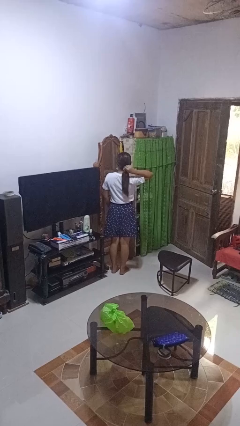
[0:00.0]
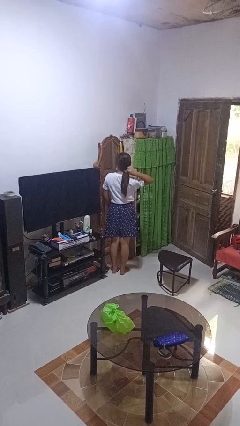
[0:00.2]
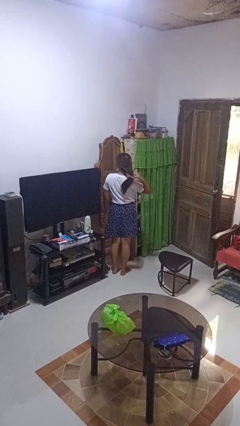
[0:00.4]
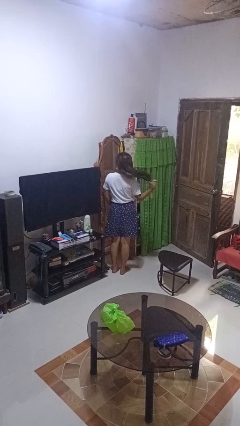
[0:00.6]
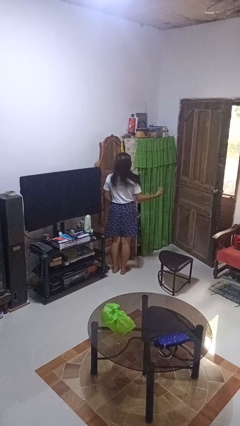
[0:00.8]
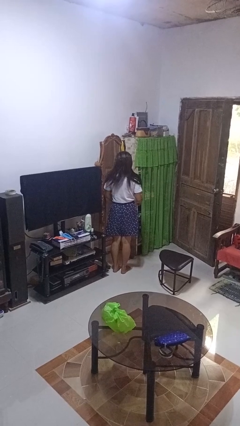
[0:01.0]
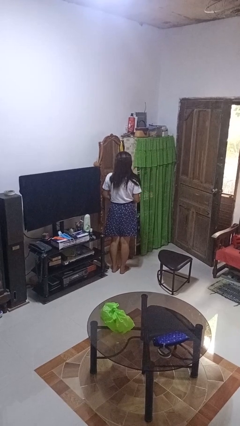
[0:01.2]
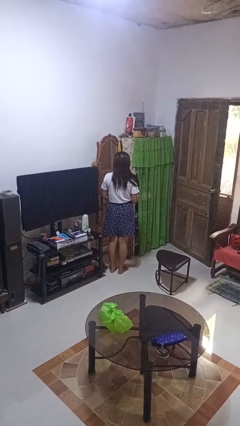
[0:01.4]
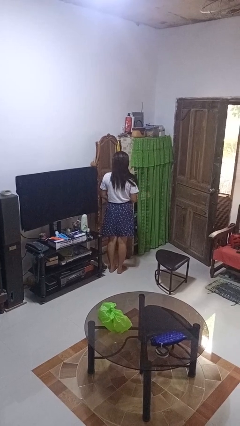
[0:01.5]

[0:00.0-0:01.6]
person takes off hairtie

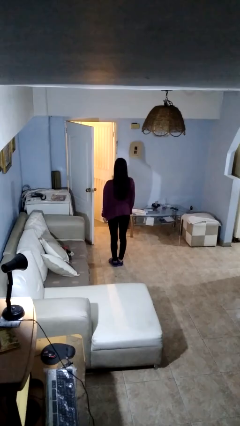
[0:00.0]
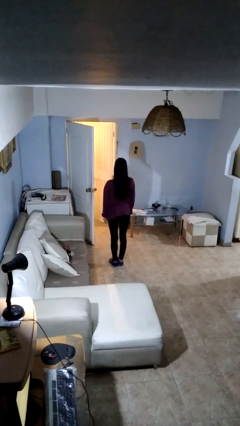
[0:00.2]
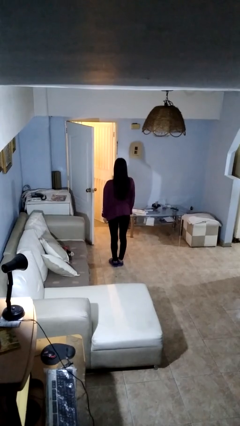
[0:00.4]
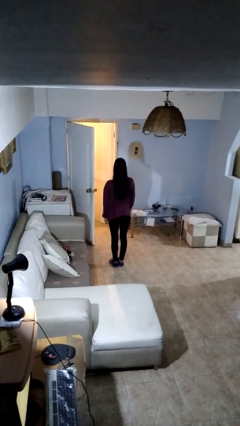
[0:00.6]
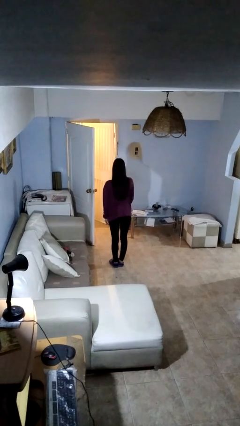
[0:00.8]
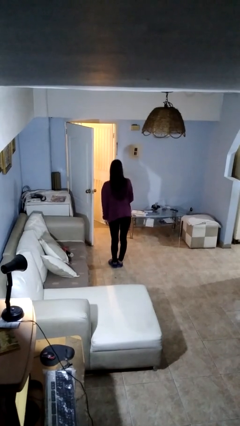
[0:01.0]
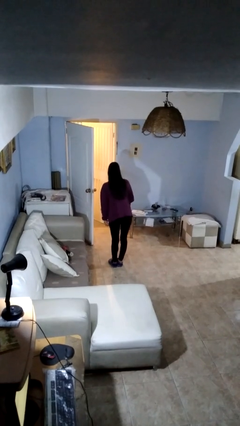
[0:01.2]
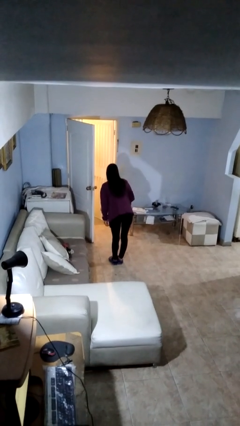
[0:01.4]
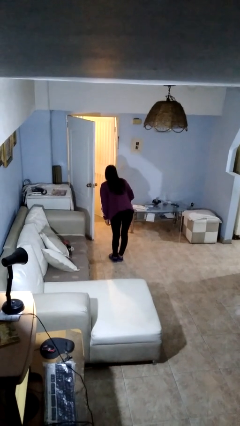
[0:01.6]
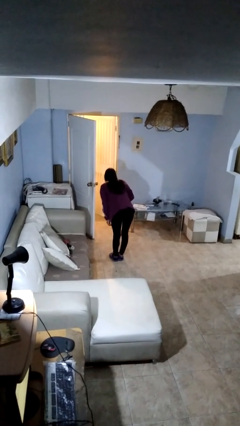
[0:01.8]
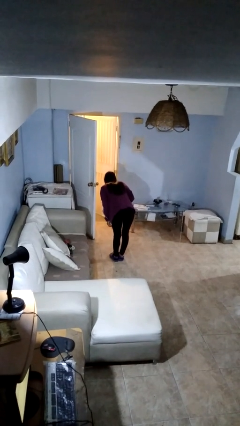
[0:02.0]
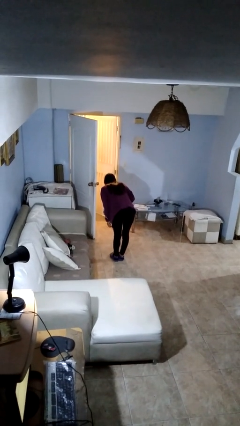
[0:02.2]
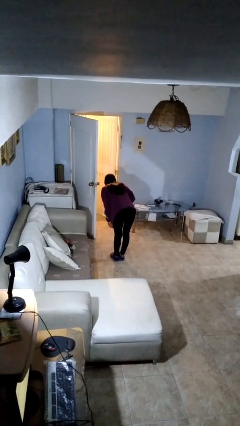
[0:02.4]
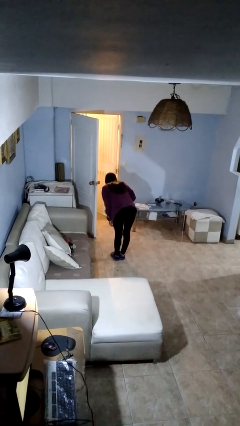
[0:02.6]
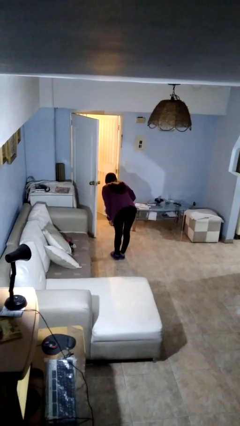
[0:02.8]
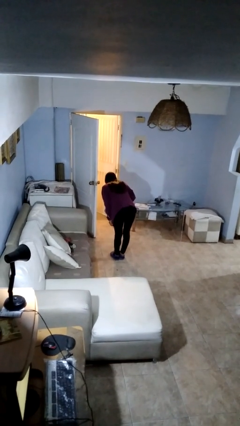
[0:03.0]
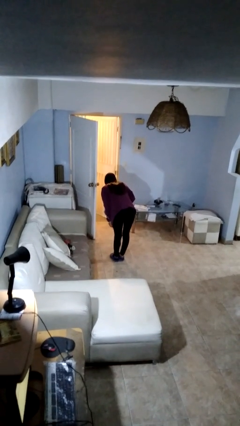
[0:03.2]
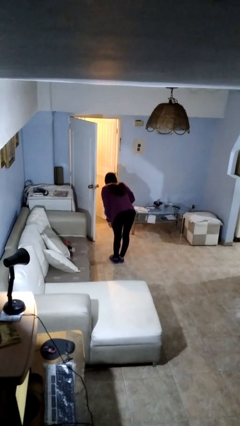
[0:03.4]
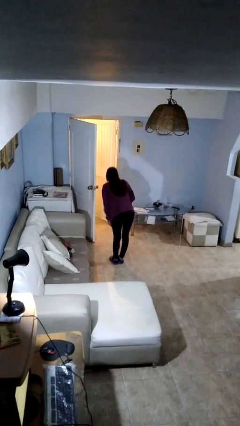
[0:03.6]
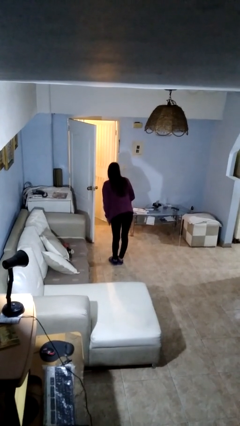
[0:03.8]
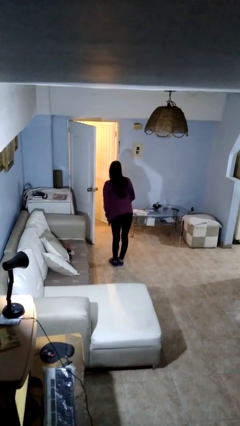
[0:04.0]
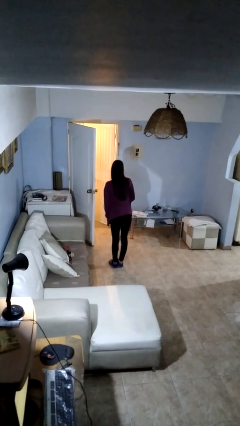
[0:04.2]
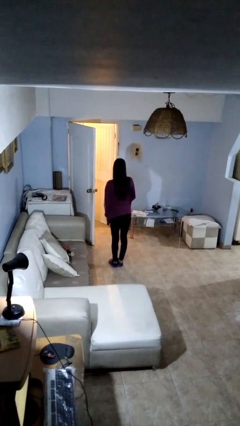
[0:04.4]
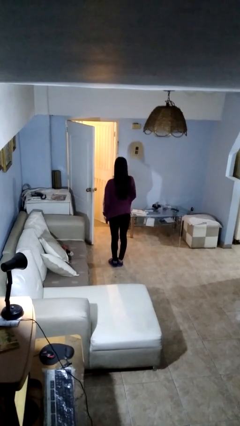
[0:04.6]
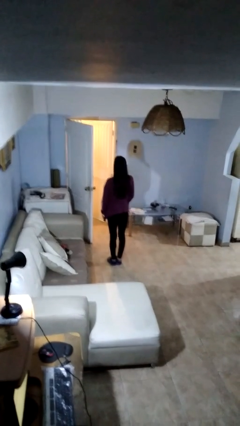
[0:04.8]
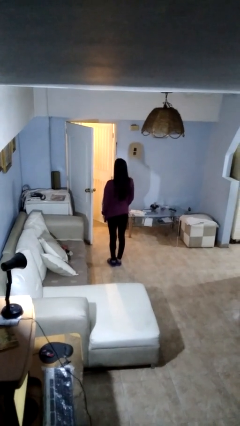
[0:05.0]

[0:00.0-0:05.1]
person bows

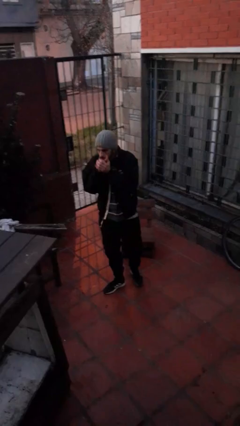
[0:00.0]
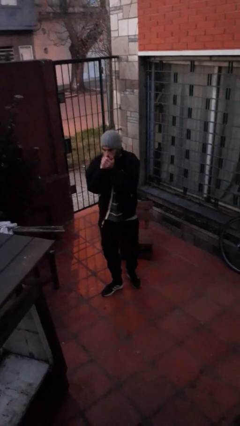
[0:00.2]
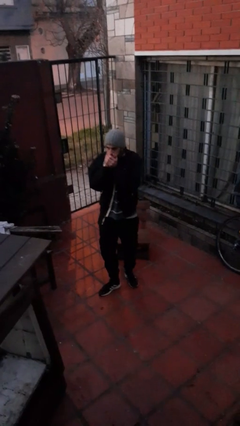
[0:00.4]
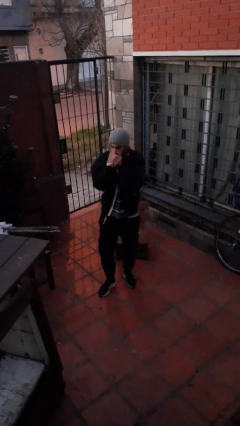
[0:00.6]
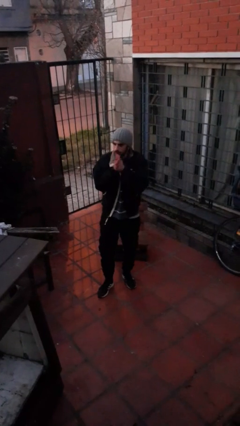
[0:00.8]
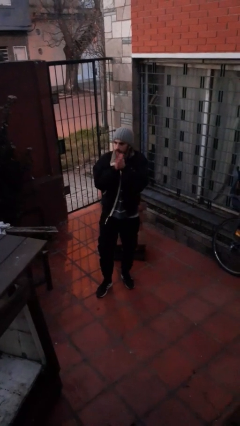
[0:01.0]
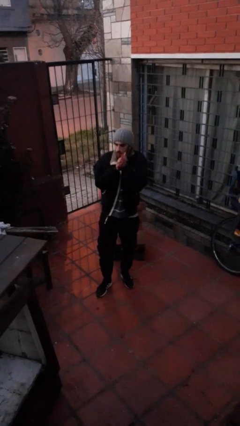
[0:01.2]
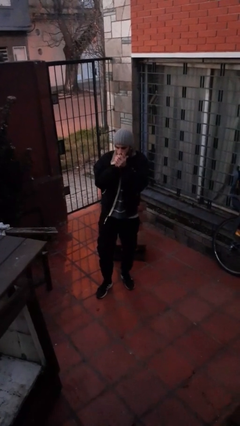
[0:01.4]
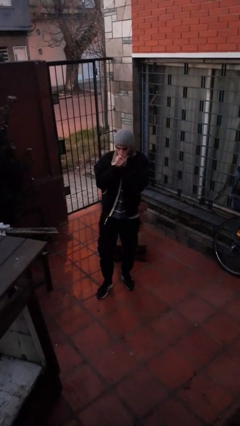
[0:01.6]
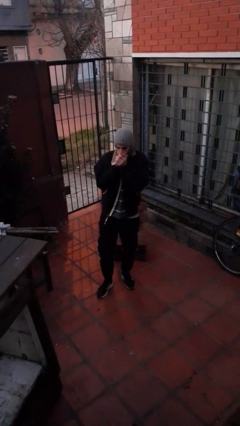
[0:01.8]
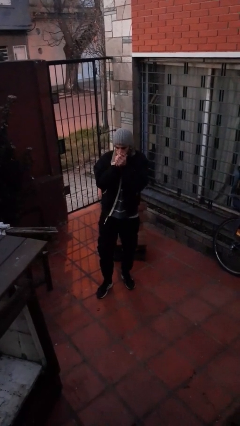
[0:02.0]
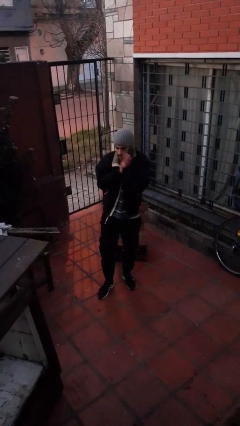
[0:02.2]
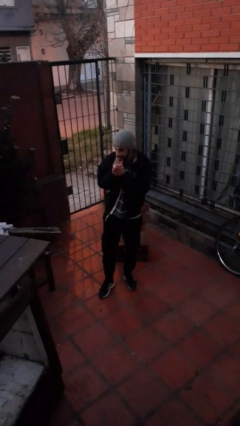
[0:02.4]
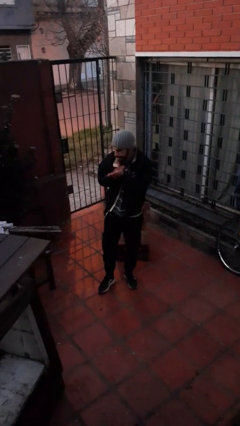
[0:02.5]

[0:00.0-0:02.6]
person blows into hands

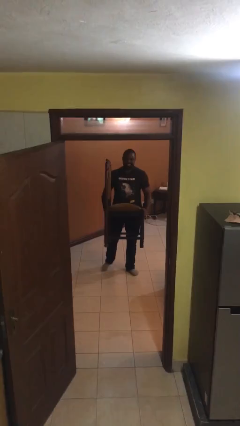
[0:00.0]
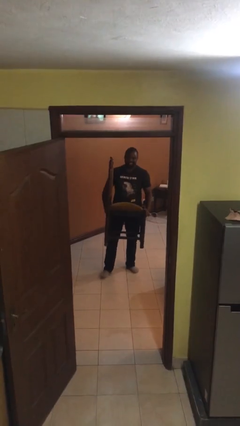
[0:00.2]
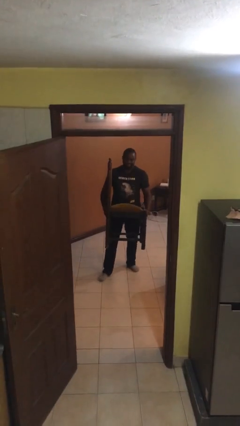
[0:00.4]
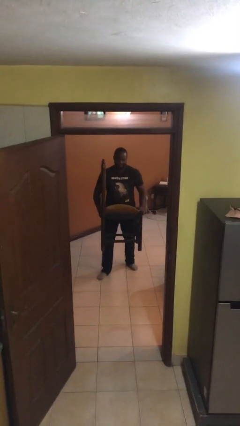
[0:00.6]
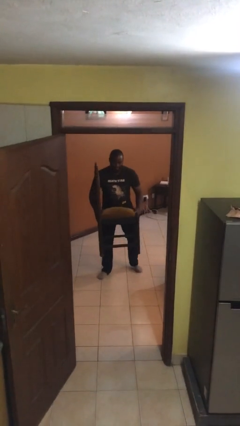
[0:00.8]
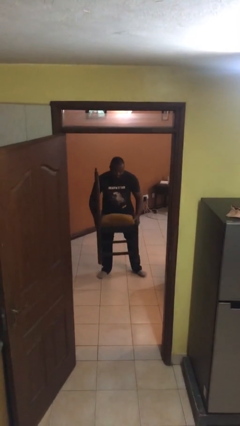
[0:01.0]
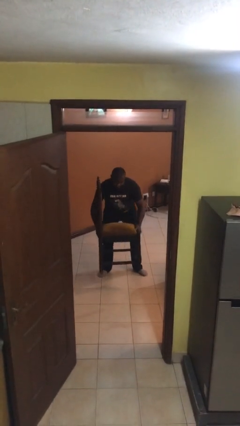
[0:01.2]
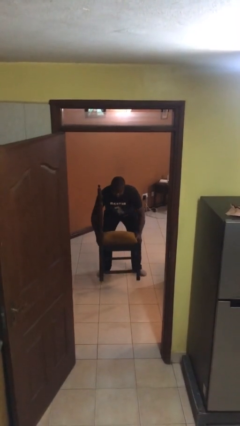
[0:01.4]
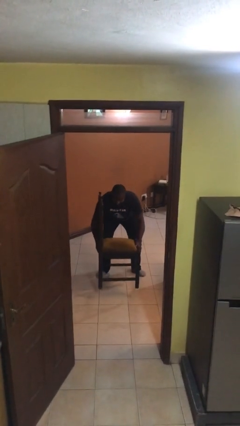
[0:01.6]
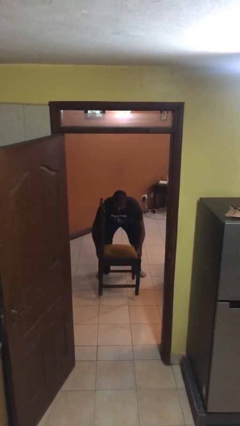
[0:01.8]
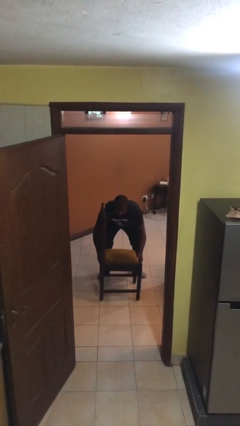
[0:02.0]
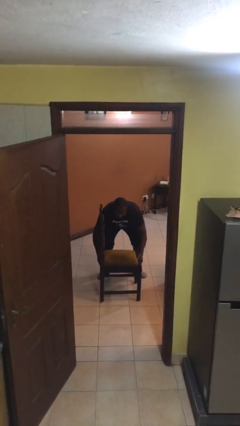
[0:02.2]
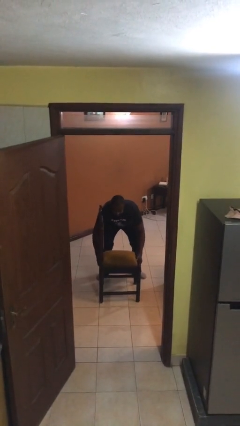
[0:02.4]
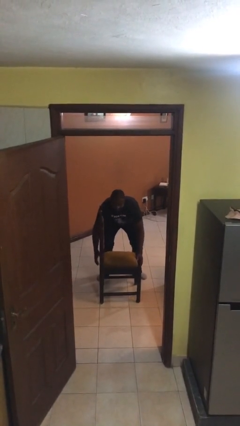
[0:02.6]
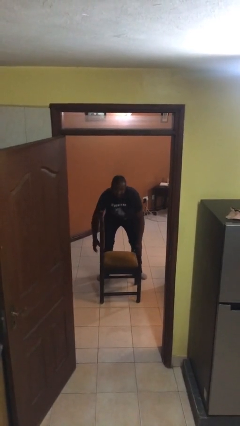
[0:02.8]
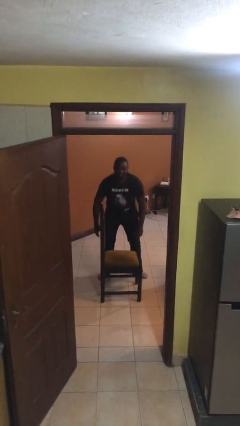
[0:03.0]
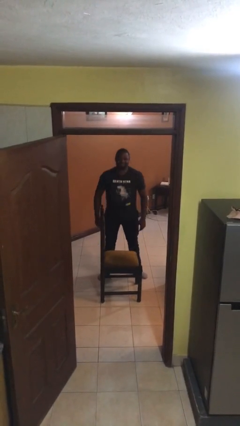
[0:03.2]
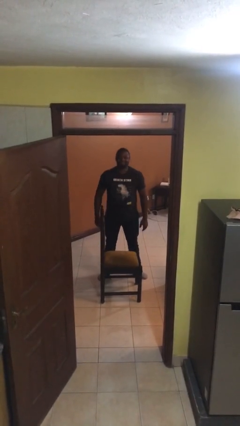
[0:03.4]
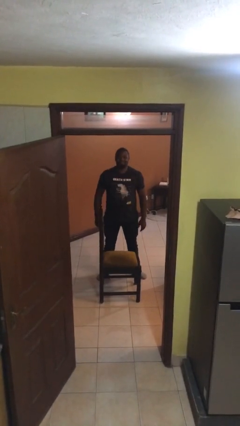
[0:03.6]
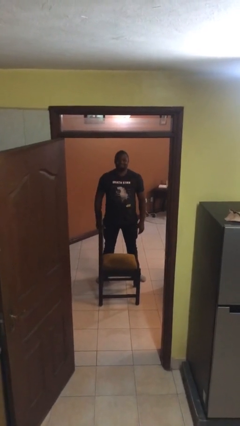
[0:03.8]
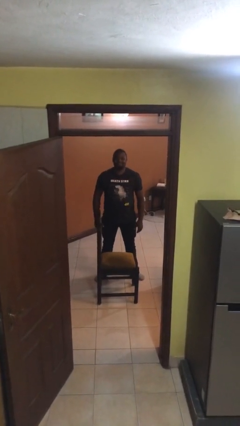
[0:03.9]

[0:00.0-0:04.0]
person puts down object on floor

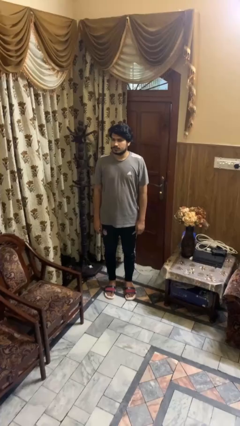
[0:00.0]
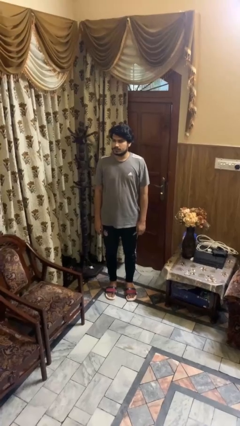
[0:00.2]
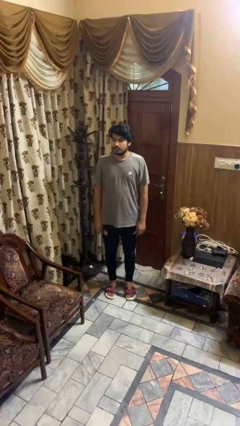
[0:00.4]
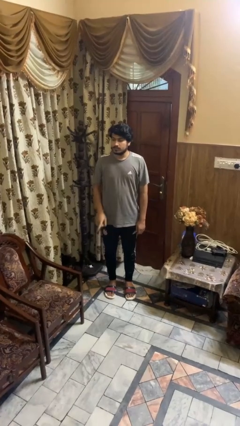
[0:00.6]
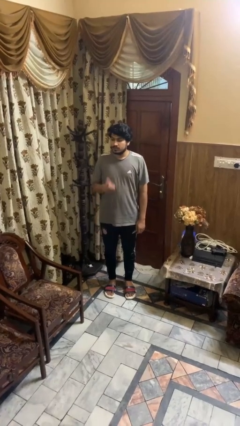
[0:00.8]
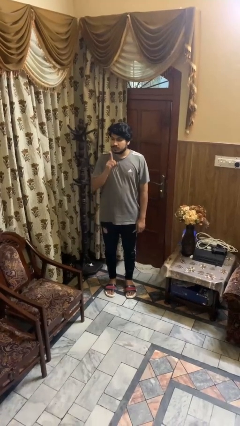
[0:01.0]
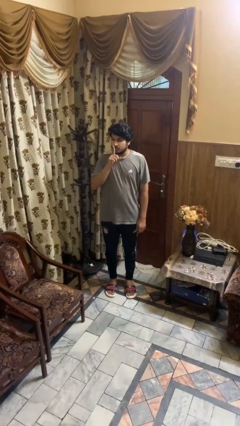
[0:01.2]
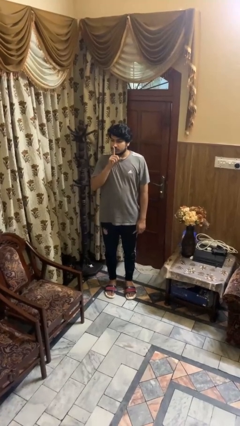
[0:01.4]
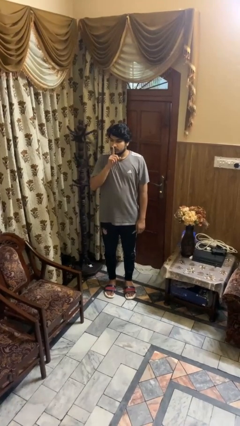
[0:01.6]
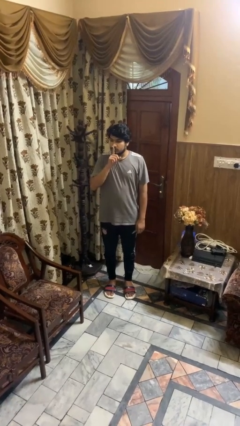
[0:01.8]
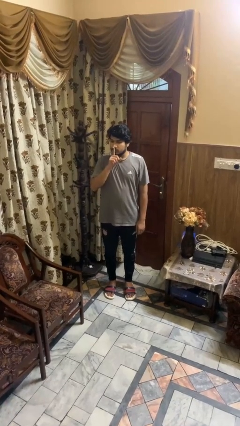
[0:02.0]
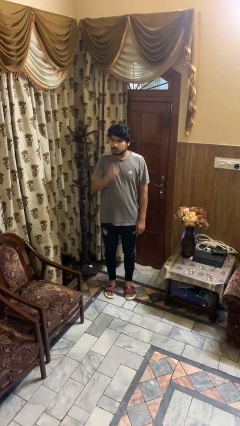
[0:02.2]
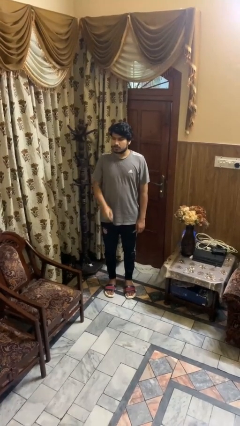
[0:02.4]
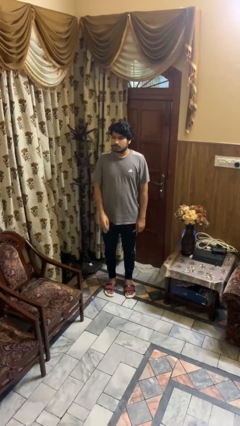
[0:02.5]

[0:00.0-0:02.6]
person gestures be quiet

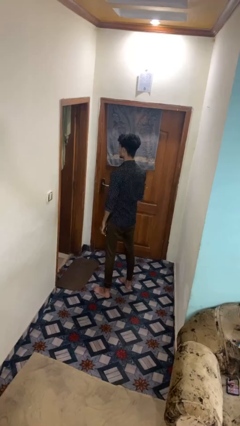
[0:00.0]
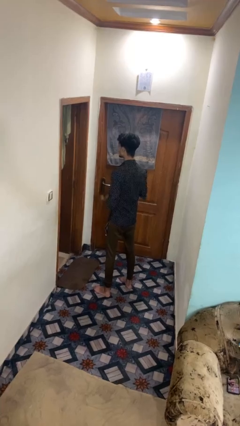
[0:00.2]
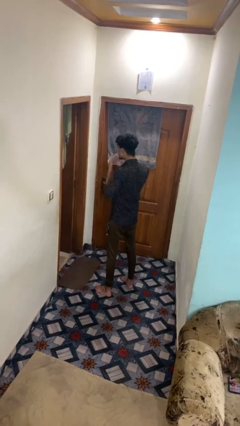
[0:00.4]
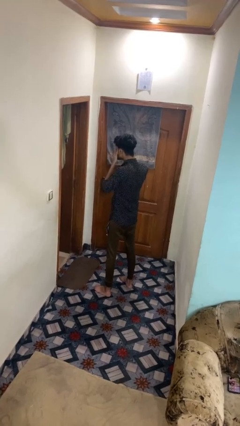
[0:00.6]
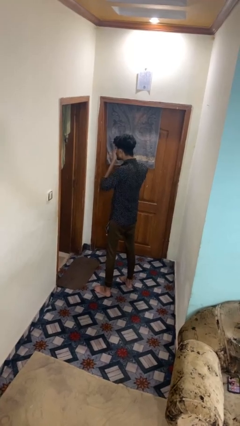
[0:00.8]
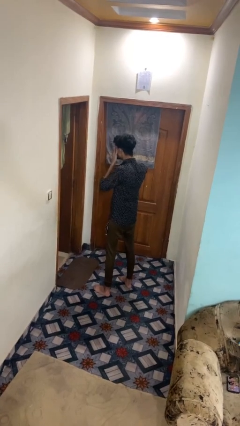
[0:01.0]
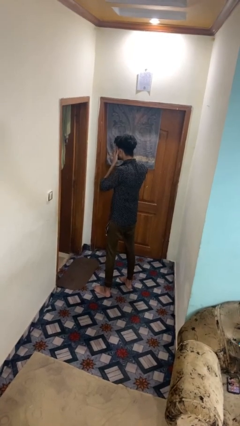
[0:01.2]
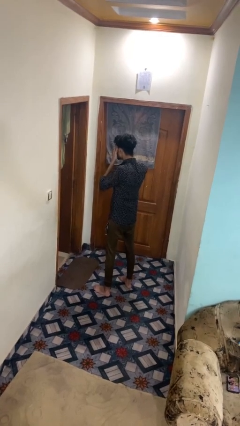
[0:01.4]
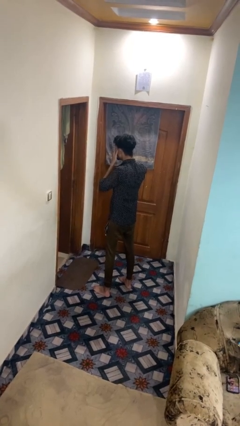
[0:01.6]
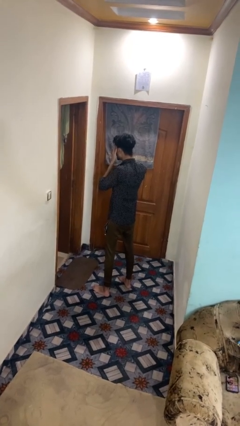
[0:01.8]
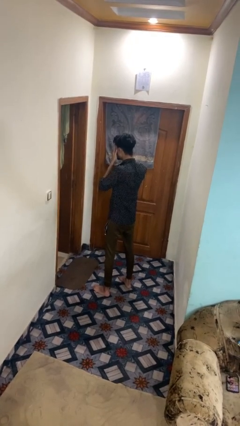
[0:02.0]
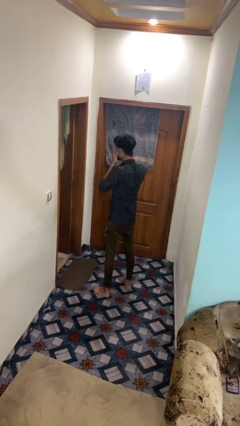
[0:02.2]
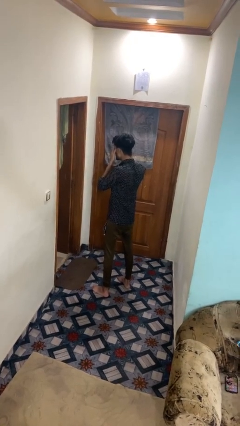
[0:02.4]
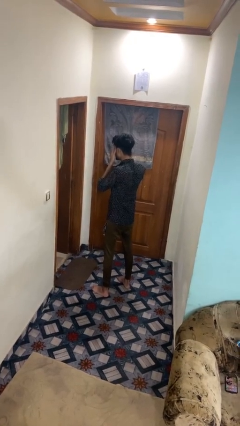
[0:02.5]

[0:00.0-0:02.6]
person rubs eyes
